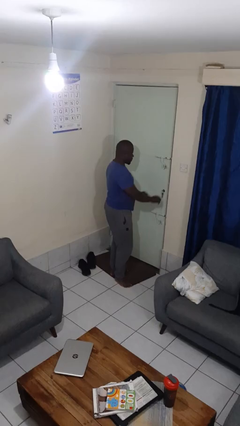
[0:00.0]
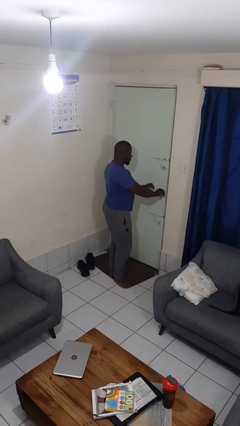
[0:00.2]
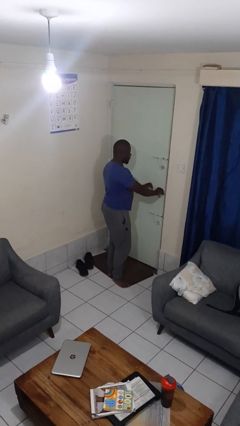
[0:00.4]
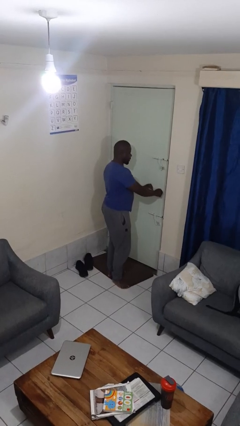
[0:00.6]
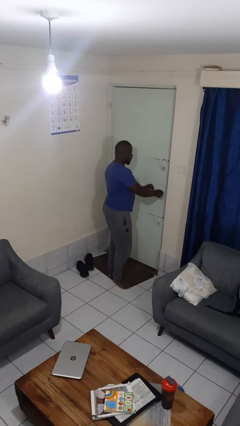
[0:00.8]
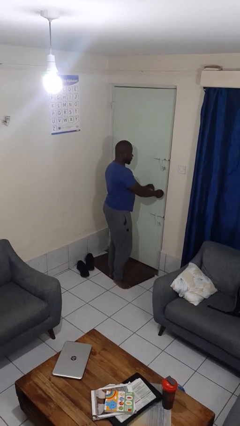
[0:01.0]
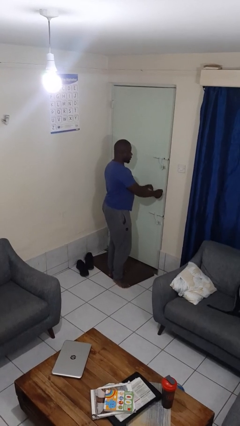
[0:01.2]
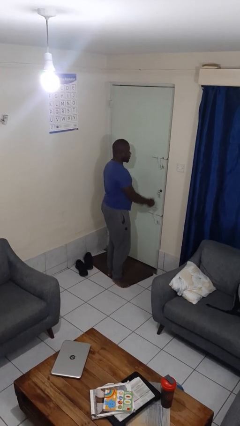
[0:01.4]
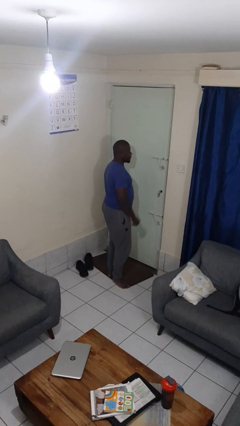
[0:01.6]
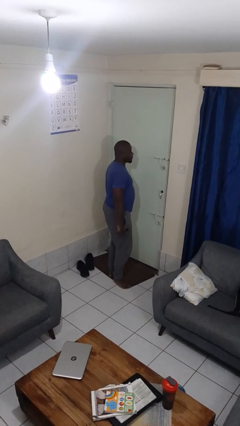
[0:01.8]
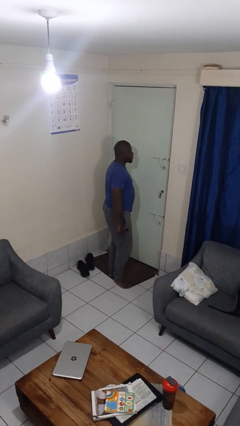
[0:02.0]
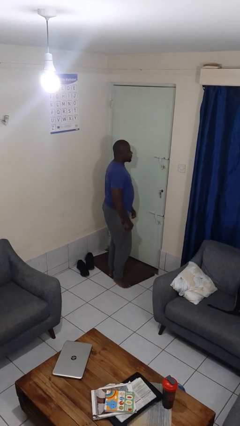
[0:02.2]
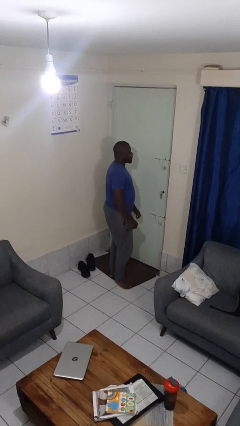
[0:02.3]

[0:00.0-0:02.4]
person locks door with keys

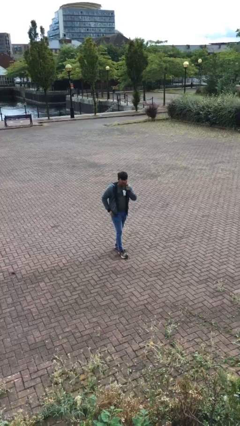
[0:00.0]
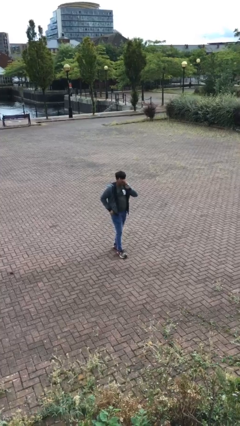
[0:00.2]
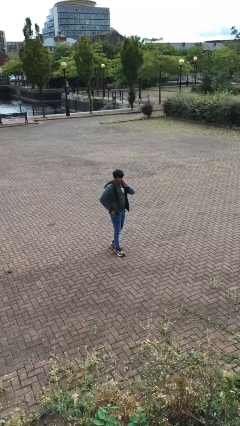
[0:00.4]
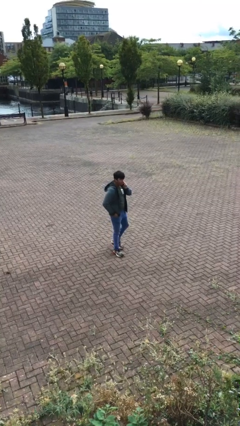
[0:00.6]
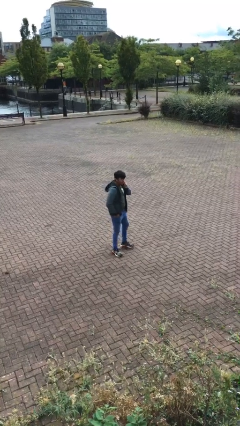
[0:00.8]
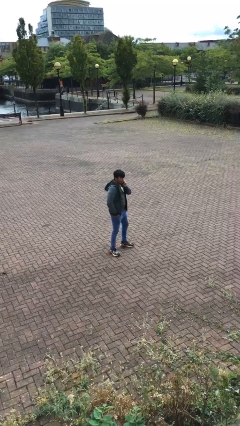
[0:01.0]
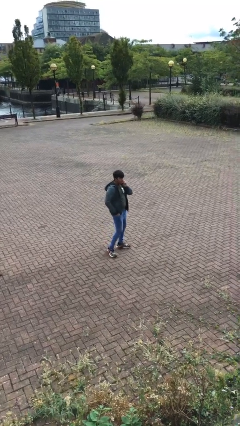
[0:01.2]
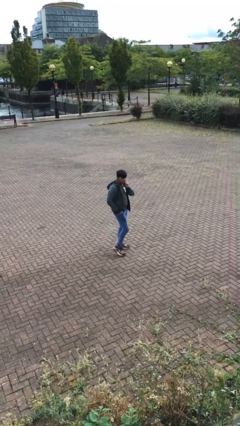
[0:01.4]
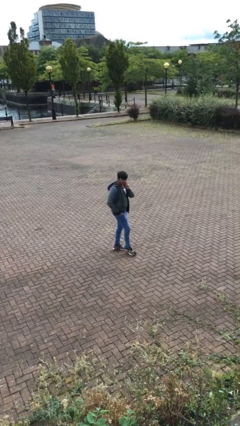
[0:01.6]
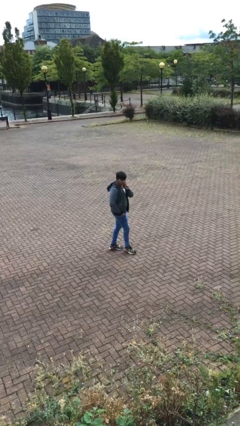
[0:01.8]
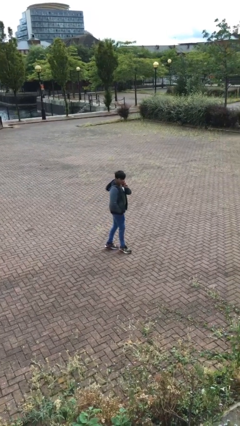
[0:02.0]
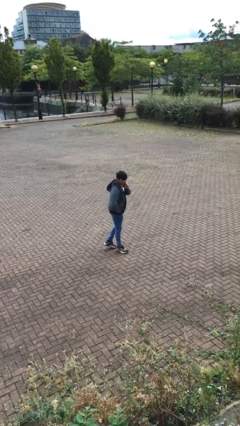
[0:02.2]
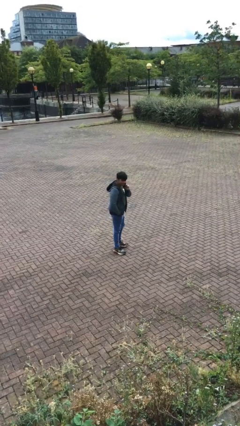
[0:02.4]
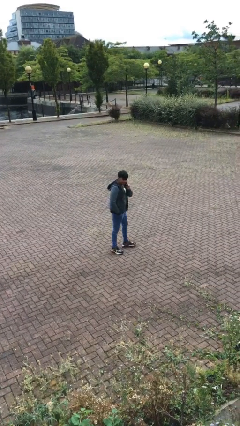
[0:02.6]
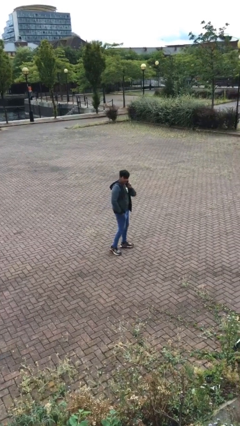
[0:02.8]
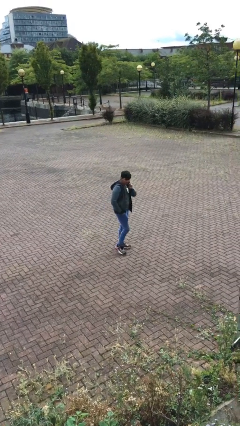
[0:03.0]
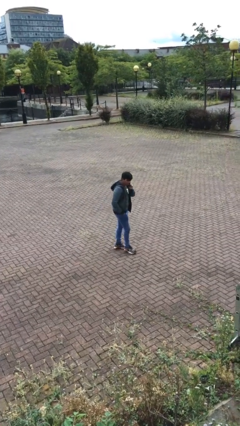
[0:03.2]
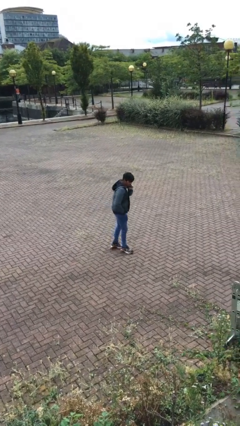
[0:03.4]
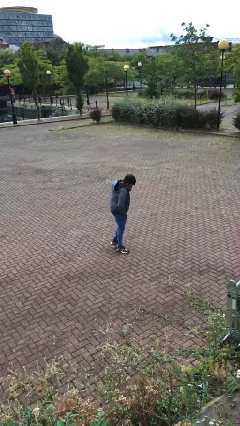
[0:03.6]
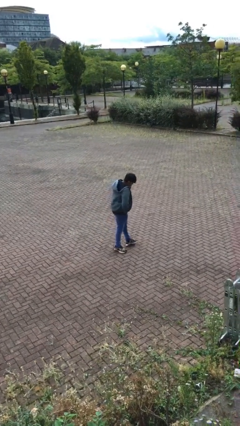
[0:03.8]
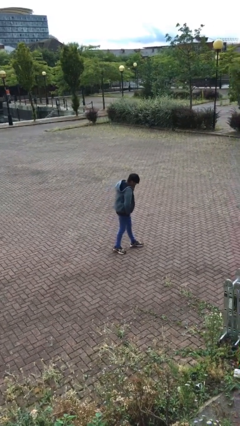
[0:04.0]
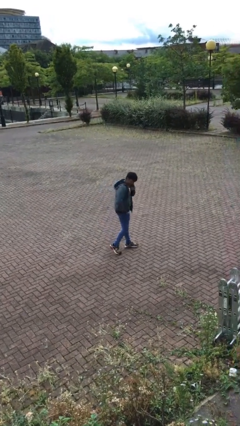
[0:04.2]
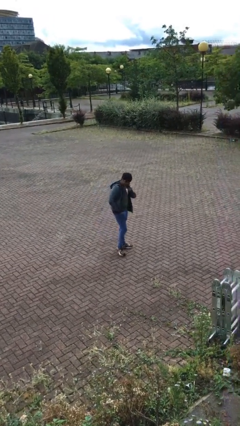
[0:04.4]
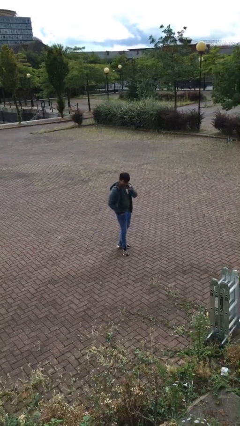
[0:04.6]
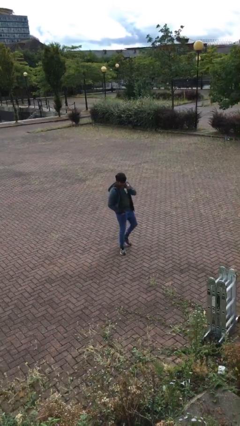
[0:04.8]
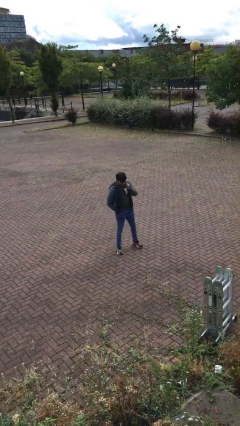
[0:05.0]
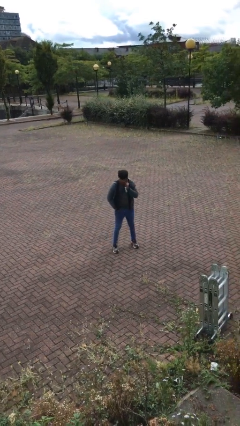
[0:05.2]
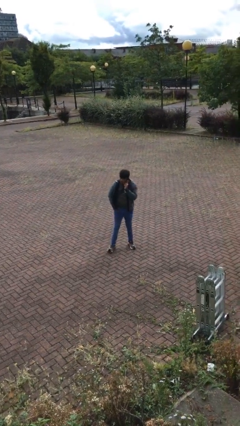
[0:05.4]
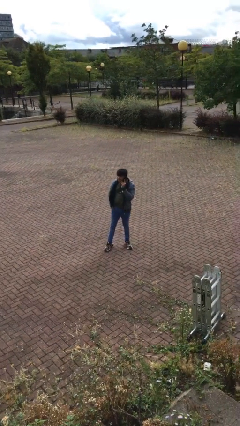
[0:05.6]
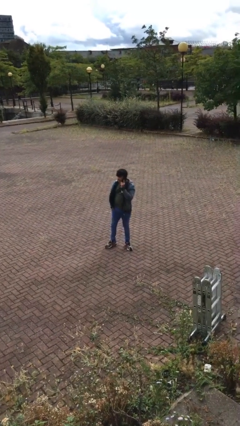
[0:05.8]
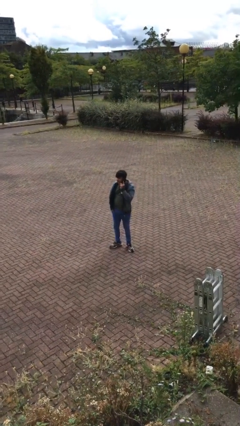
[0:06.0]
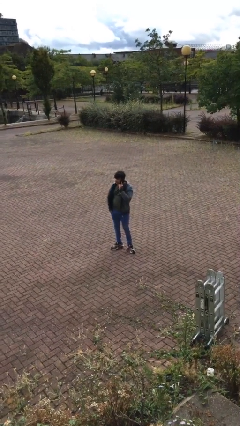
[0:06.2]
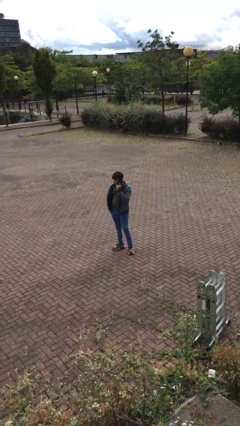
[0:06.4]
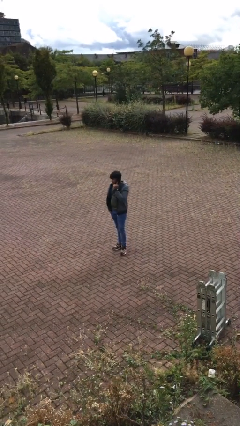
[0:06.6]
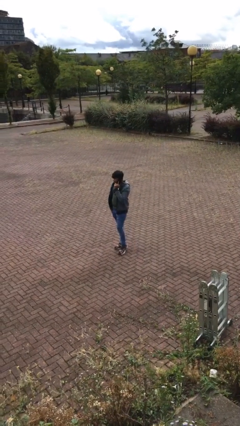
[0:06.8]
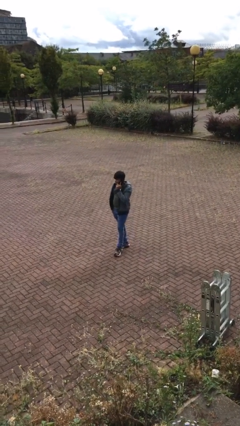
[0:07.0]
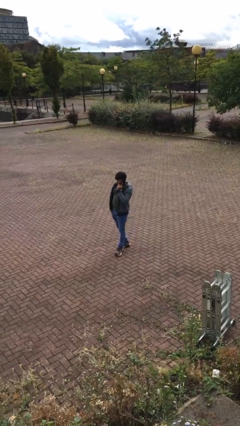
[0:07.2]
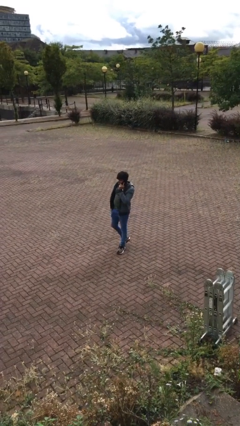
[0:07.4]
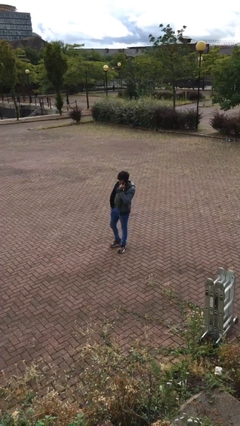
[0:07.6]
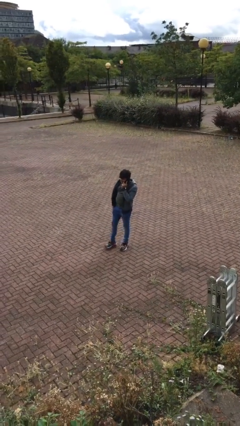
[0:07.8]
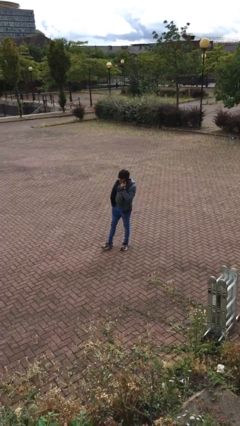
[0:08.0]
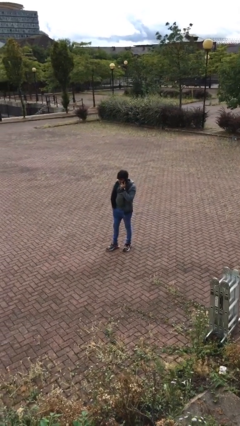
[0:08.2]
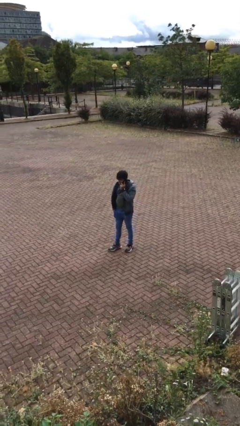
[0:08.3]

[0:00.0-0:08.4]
person talks on phone

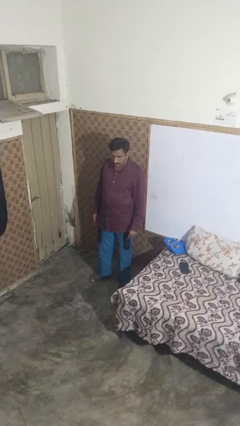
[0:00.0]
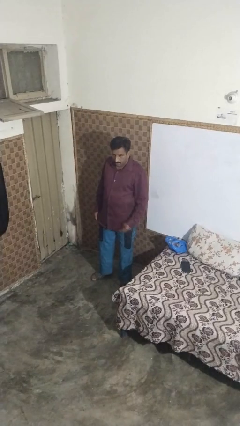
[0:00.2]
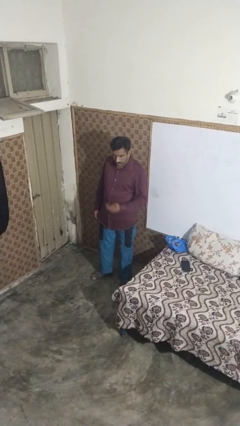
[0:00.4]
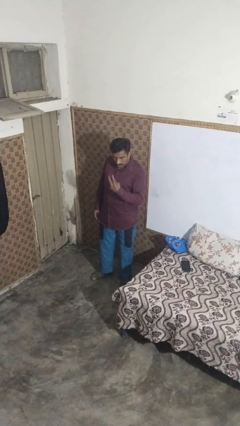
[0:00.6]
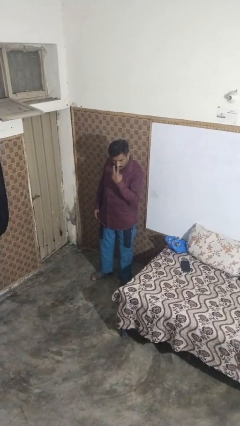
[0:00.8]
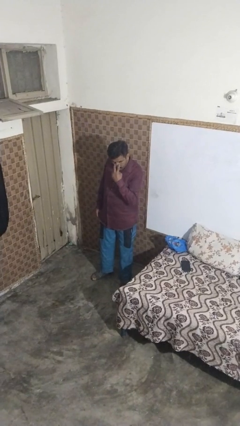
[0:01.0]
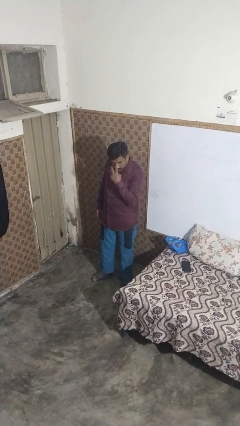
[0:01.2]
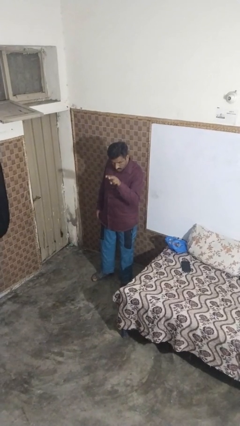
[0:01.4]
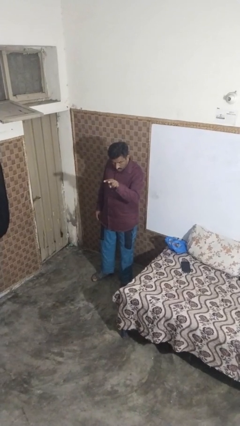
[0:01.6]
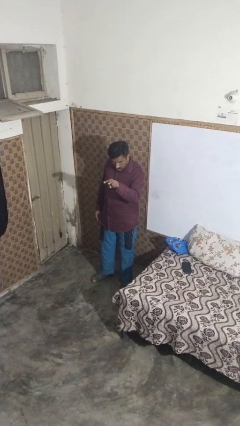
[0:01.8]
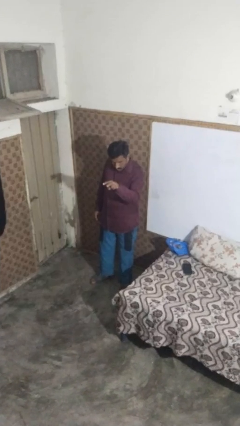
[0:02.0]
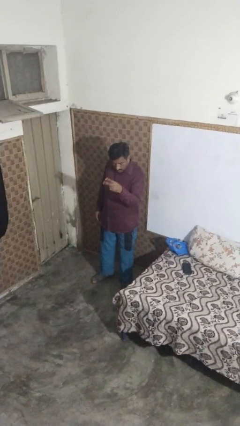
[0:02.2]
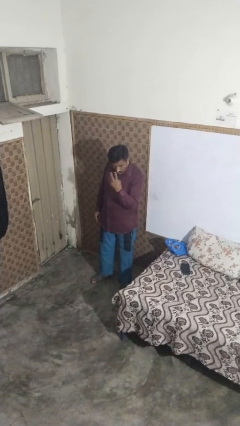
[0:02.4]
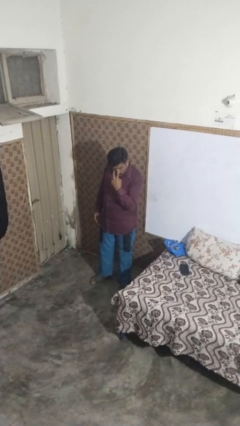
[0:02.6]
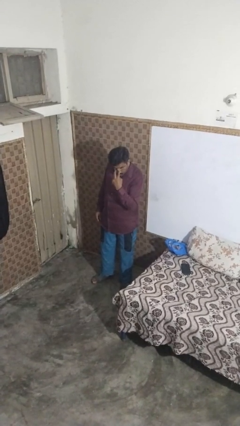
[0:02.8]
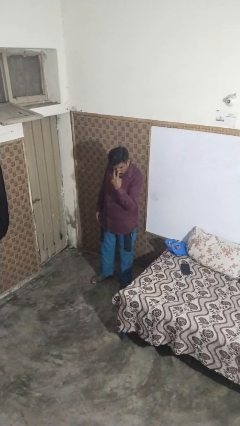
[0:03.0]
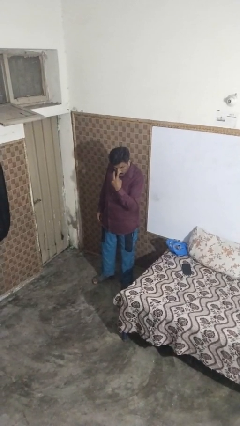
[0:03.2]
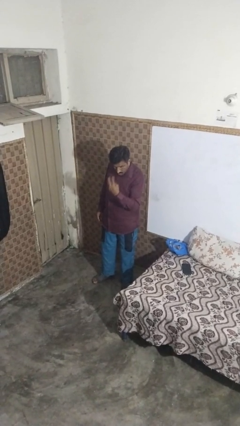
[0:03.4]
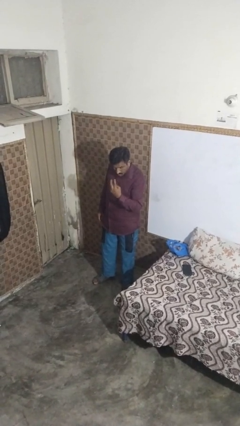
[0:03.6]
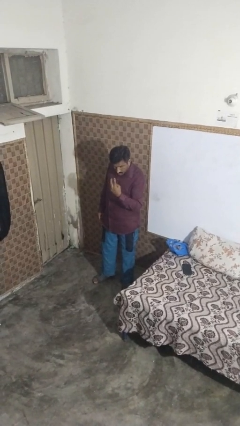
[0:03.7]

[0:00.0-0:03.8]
person gestures watch closely

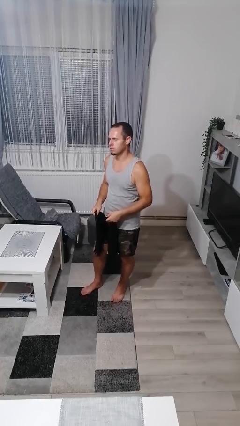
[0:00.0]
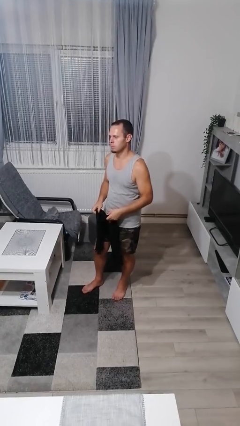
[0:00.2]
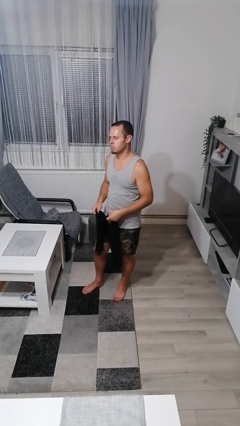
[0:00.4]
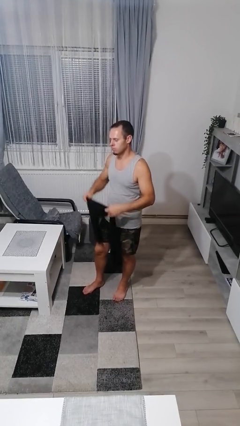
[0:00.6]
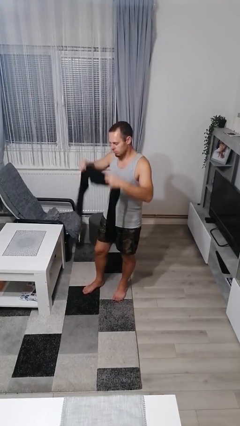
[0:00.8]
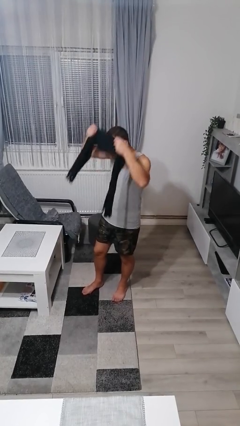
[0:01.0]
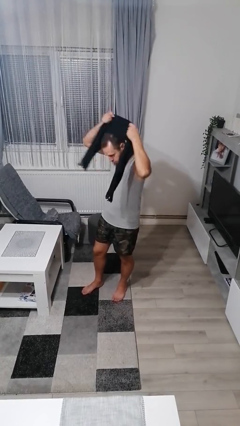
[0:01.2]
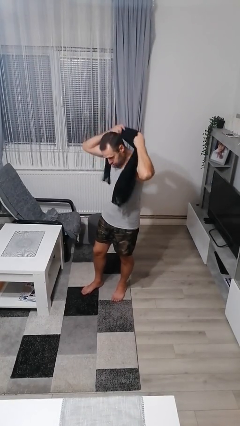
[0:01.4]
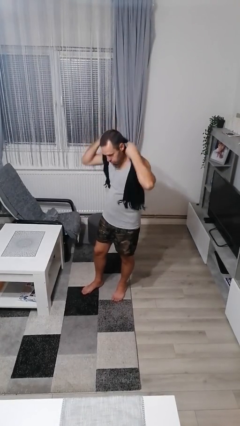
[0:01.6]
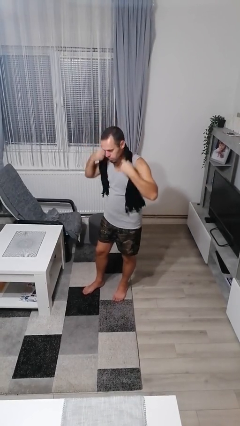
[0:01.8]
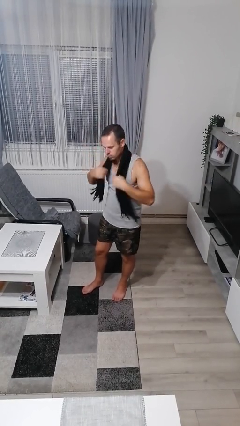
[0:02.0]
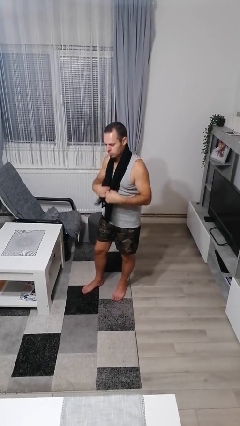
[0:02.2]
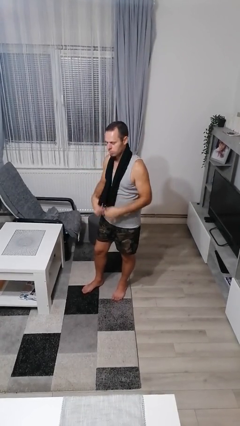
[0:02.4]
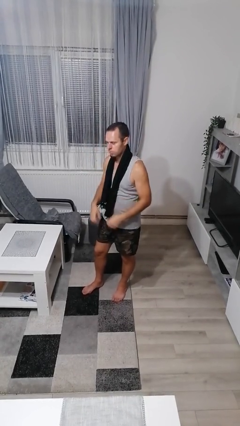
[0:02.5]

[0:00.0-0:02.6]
person puts on scarf

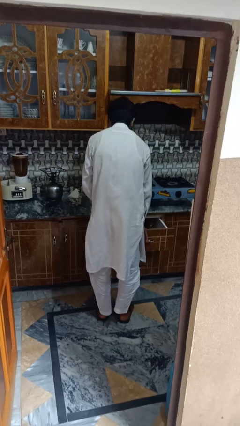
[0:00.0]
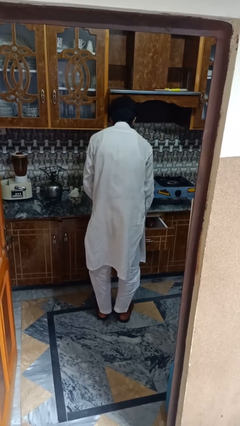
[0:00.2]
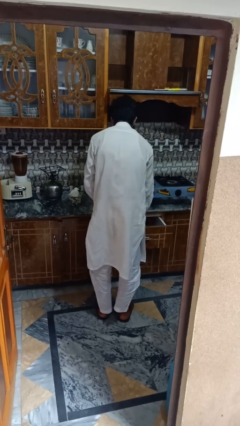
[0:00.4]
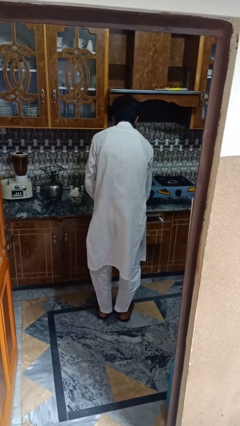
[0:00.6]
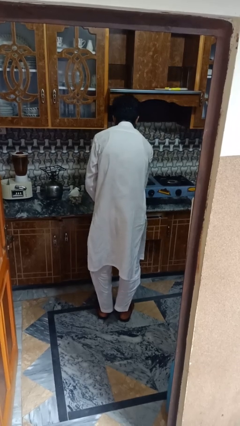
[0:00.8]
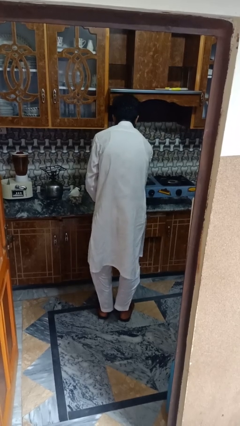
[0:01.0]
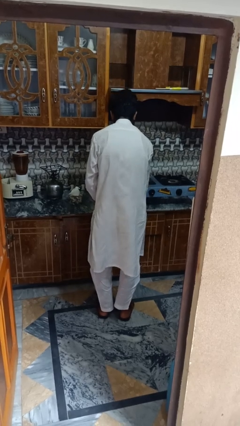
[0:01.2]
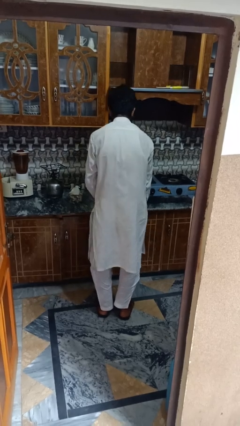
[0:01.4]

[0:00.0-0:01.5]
person closes kitchen drawer
